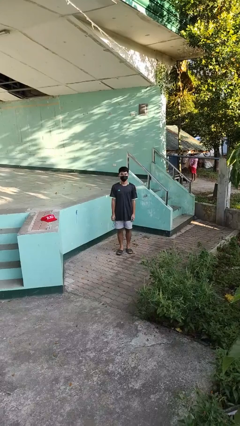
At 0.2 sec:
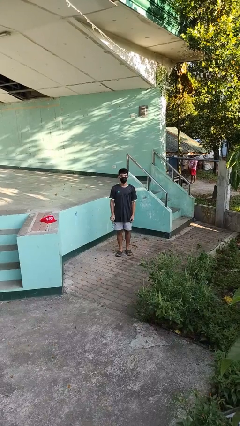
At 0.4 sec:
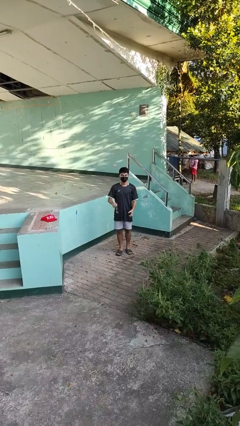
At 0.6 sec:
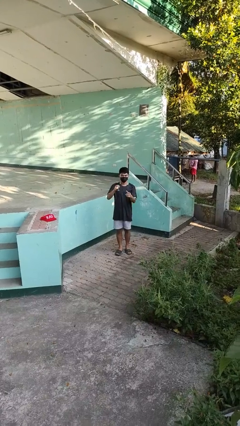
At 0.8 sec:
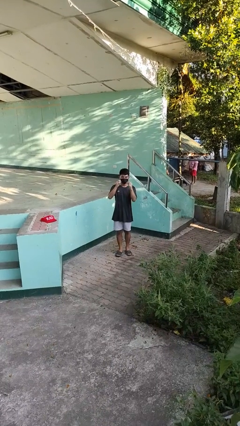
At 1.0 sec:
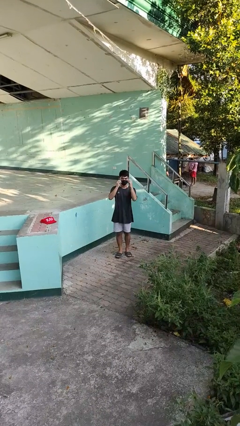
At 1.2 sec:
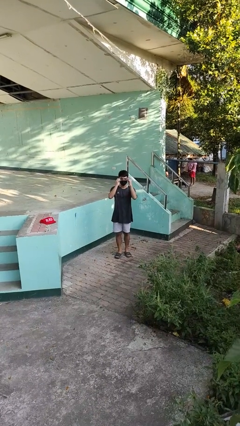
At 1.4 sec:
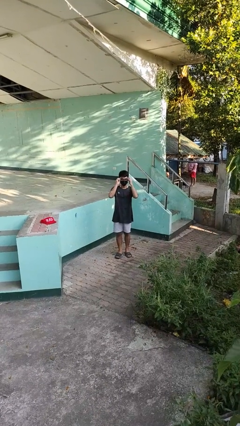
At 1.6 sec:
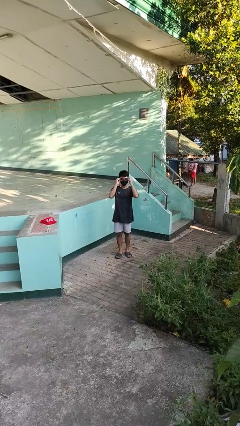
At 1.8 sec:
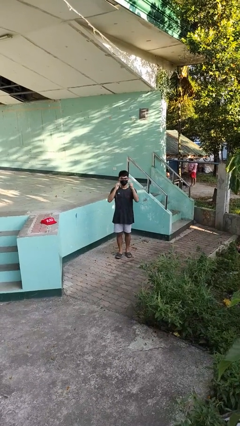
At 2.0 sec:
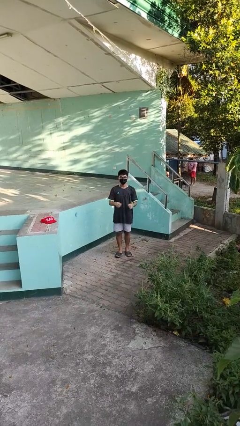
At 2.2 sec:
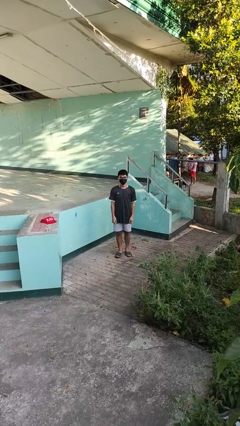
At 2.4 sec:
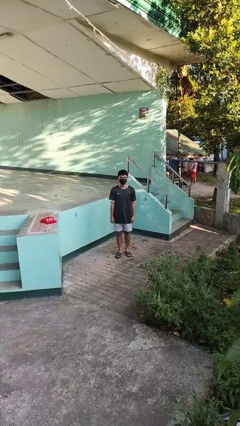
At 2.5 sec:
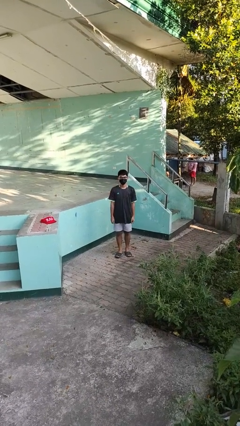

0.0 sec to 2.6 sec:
person puts on glasses

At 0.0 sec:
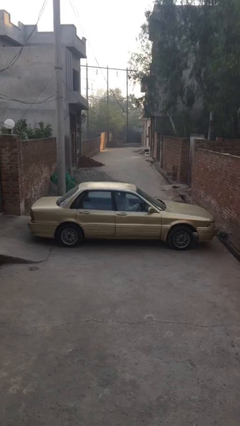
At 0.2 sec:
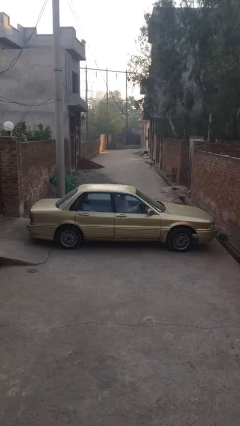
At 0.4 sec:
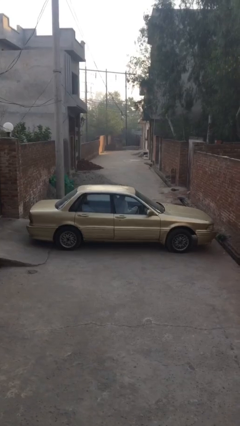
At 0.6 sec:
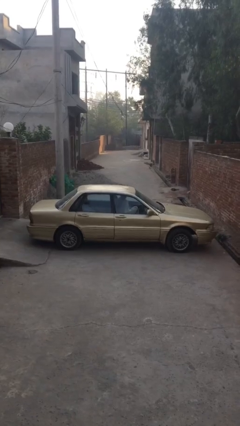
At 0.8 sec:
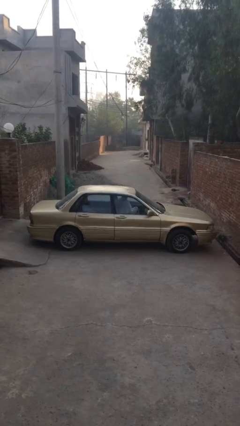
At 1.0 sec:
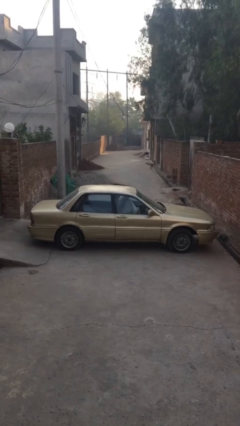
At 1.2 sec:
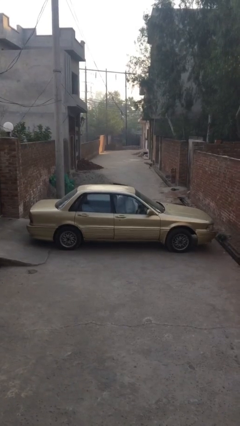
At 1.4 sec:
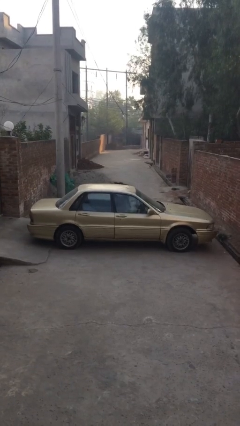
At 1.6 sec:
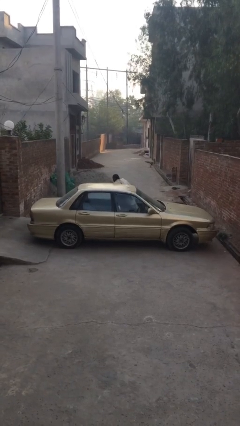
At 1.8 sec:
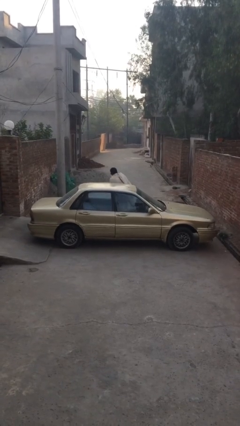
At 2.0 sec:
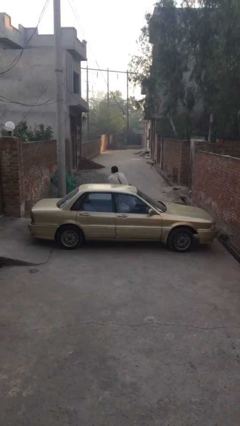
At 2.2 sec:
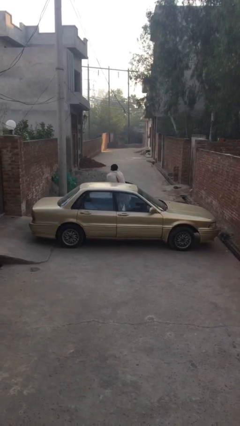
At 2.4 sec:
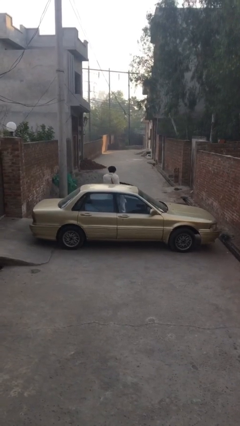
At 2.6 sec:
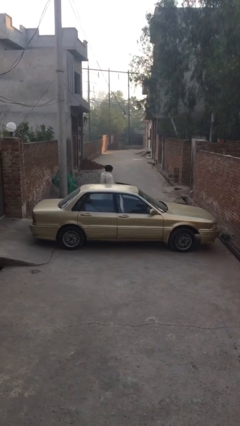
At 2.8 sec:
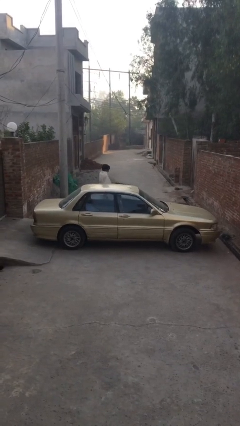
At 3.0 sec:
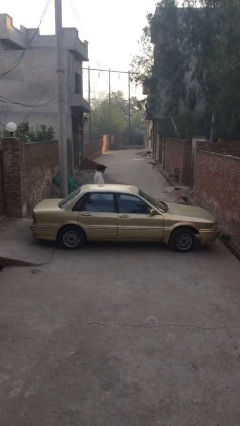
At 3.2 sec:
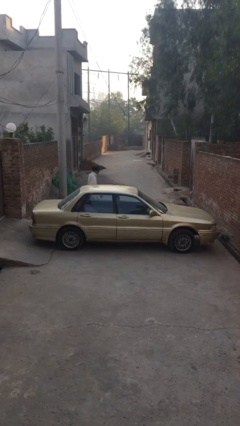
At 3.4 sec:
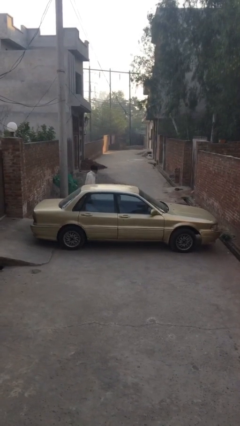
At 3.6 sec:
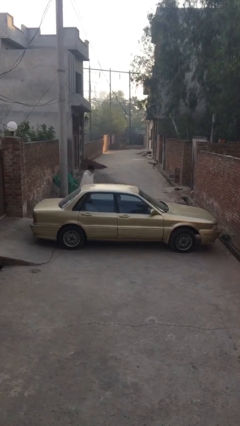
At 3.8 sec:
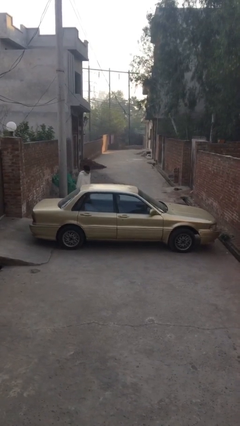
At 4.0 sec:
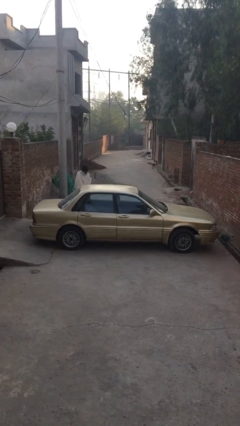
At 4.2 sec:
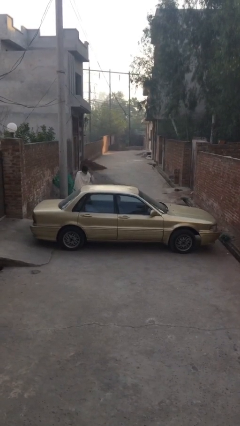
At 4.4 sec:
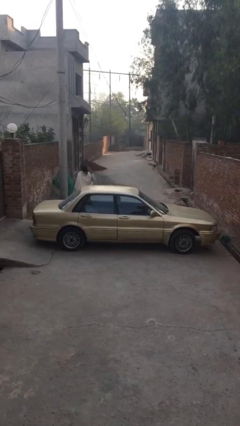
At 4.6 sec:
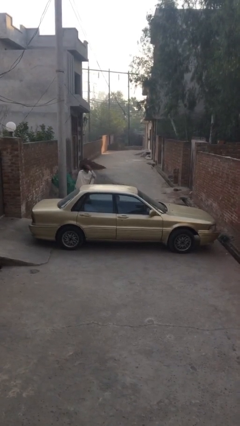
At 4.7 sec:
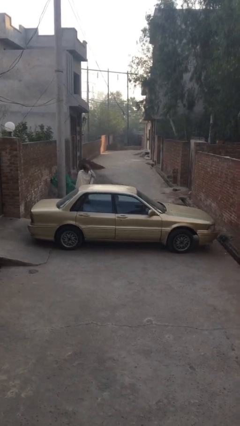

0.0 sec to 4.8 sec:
car drops off person

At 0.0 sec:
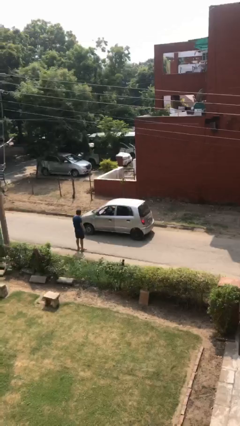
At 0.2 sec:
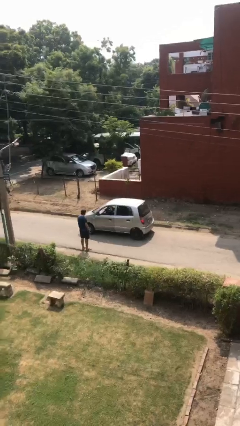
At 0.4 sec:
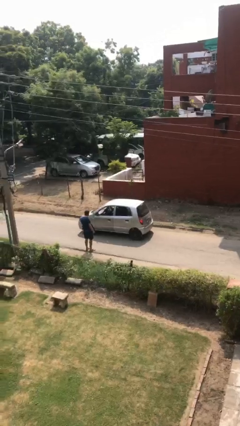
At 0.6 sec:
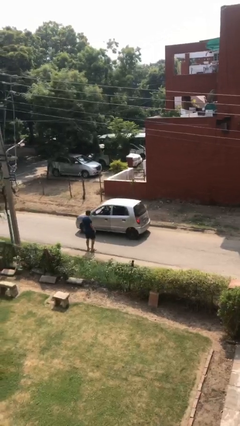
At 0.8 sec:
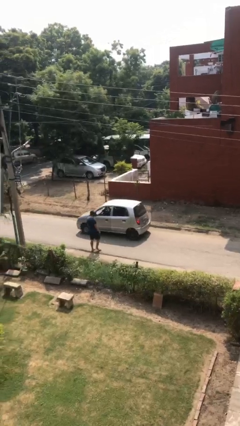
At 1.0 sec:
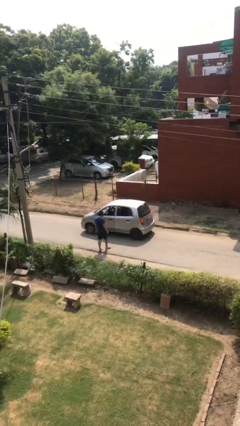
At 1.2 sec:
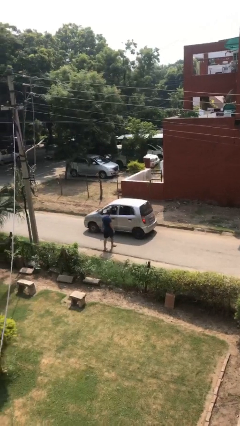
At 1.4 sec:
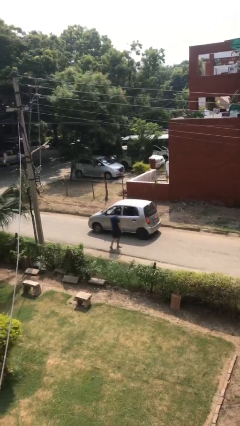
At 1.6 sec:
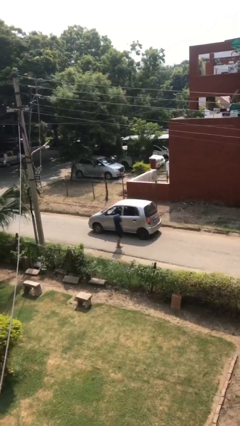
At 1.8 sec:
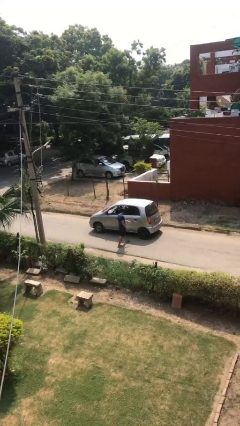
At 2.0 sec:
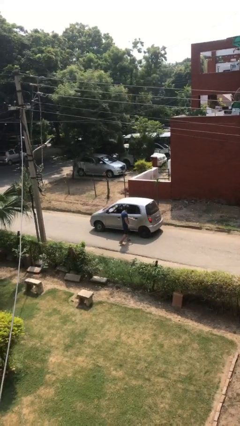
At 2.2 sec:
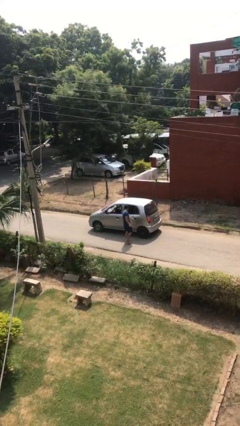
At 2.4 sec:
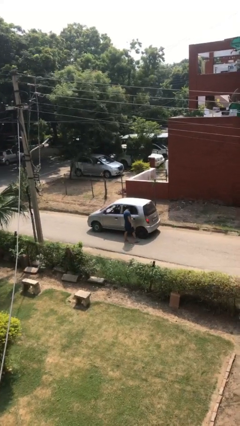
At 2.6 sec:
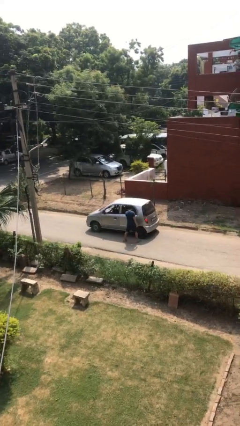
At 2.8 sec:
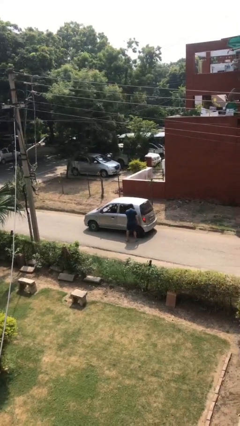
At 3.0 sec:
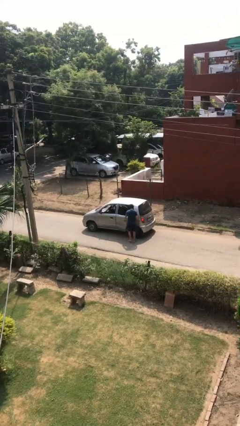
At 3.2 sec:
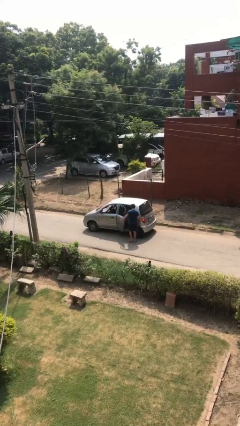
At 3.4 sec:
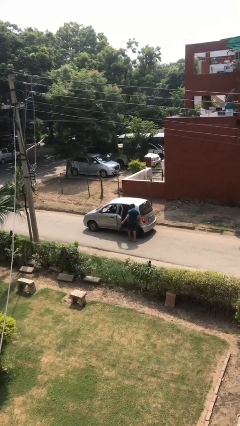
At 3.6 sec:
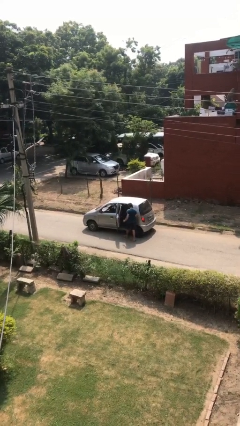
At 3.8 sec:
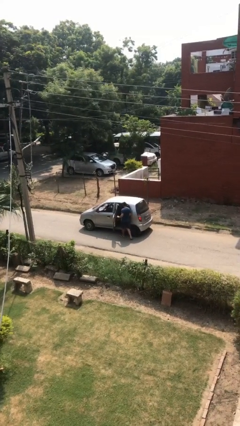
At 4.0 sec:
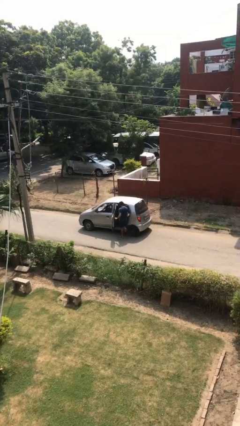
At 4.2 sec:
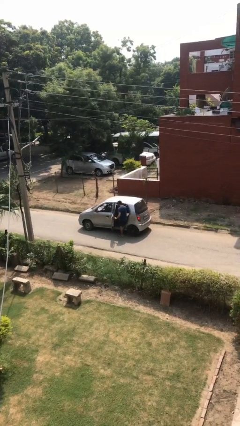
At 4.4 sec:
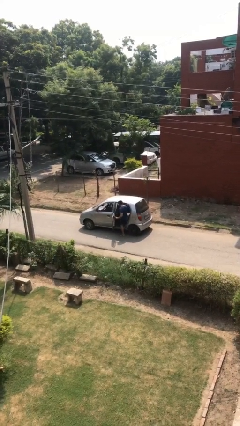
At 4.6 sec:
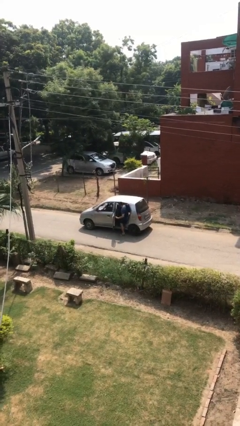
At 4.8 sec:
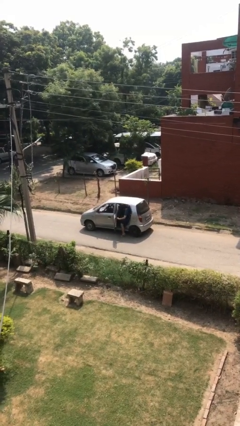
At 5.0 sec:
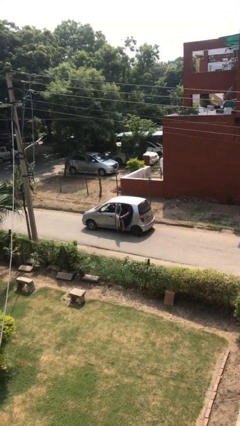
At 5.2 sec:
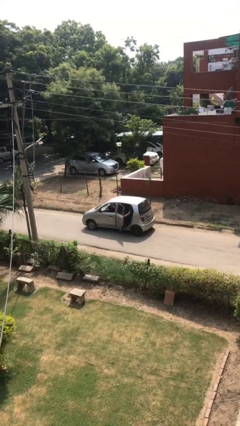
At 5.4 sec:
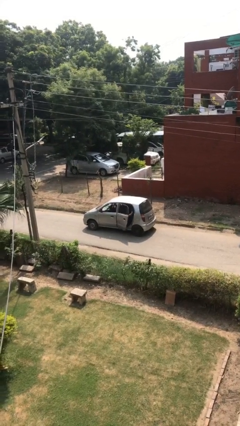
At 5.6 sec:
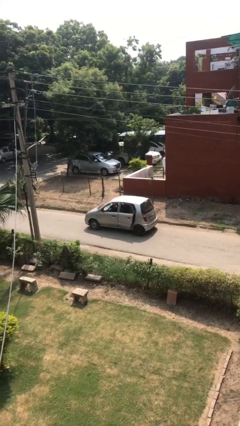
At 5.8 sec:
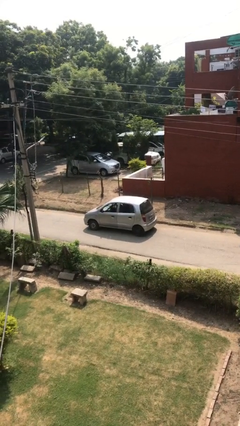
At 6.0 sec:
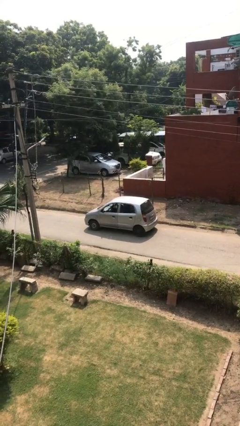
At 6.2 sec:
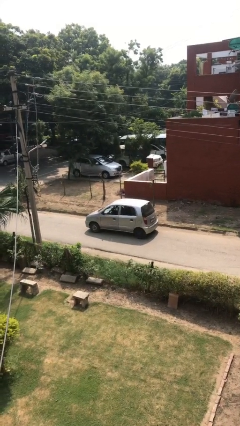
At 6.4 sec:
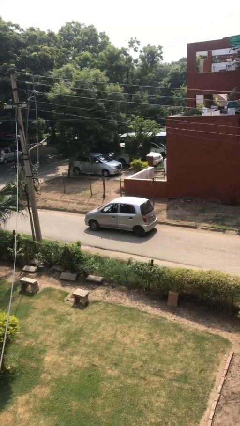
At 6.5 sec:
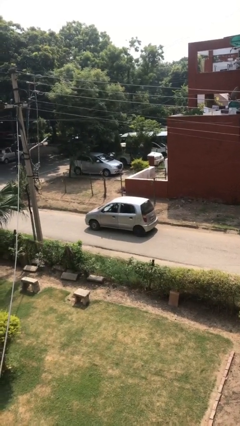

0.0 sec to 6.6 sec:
car picks up person

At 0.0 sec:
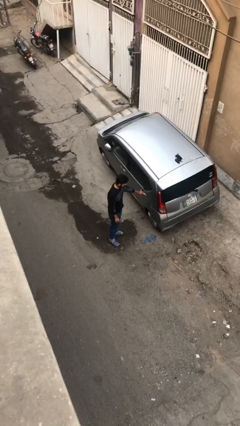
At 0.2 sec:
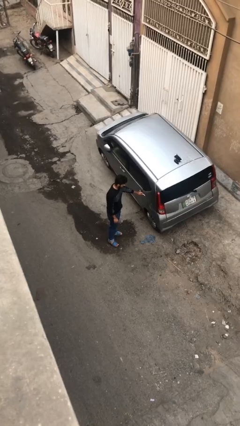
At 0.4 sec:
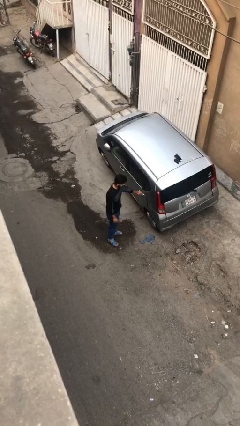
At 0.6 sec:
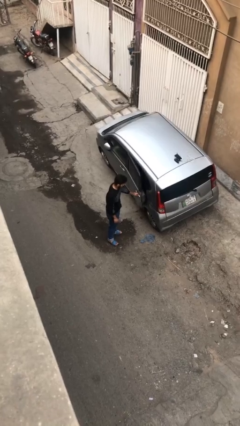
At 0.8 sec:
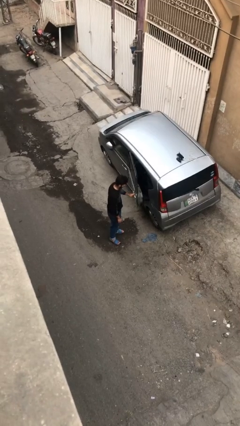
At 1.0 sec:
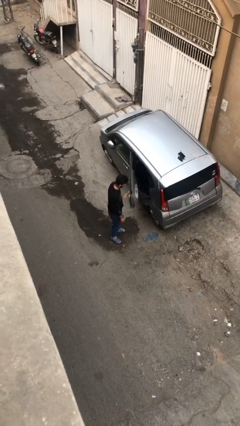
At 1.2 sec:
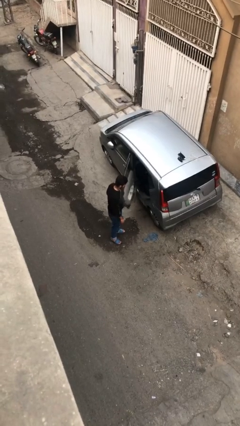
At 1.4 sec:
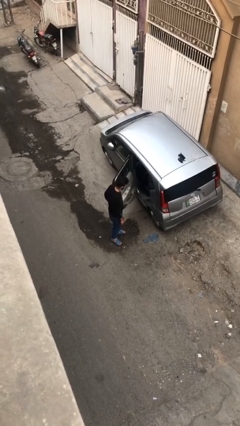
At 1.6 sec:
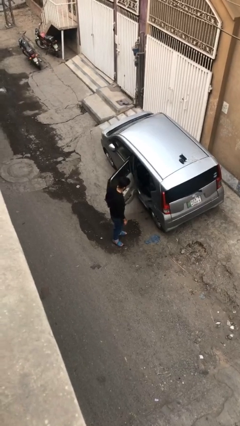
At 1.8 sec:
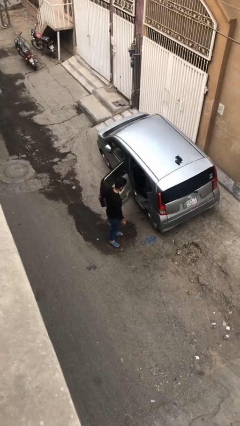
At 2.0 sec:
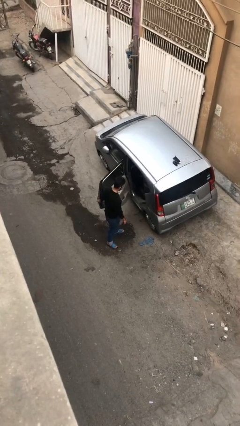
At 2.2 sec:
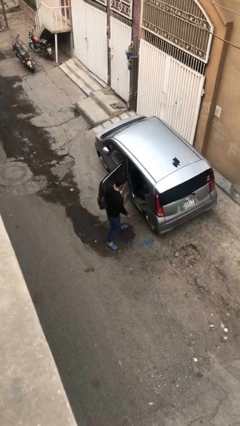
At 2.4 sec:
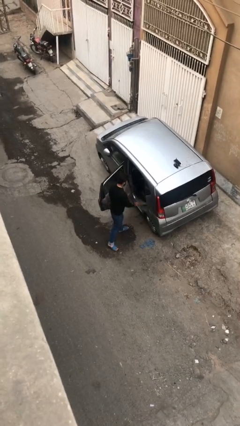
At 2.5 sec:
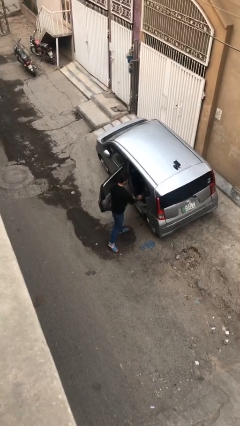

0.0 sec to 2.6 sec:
person opens car door

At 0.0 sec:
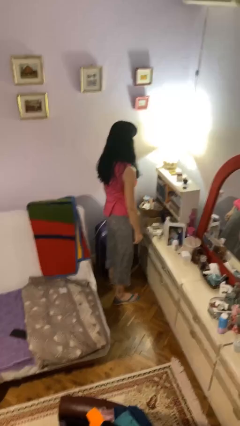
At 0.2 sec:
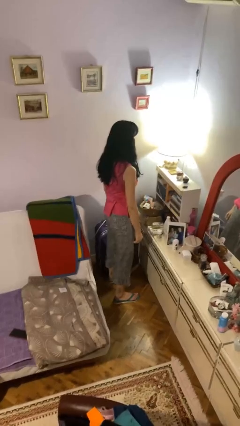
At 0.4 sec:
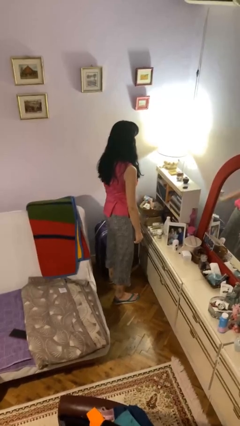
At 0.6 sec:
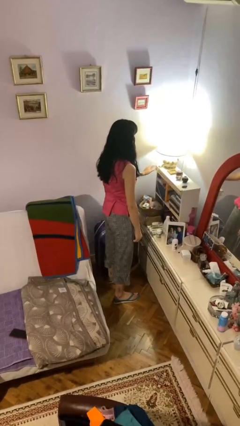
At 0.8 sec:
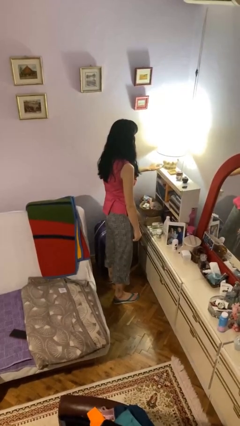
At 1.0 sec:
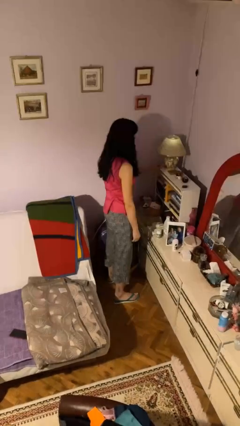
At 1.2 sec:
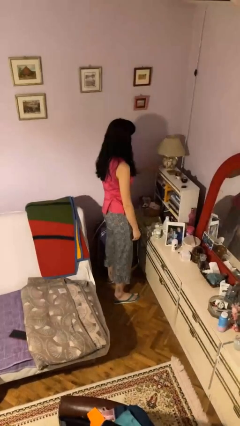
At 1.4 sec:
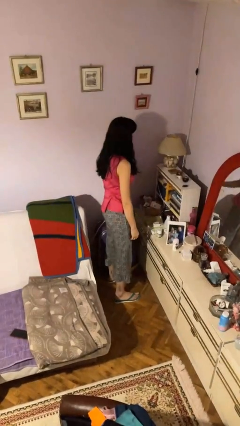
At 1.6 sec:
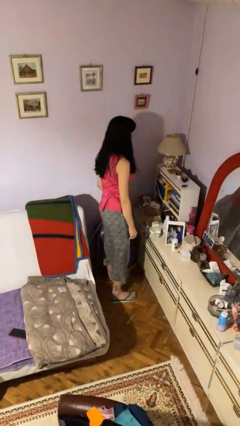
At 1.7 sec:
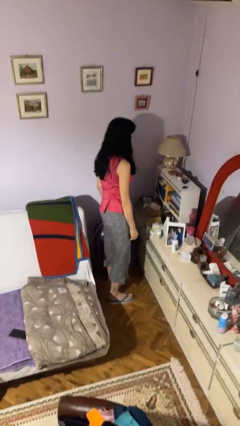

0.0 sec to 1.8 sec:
person turns off lamp
